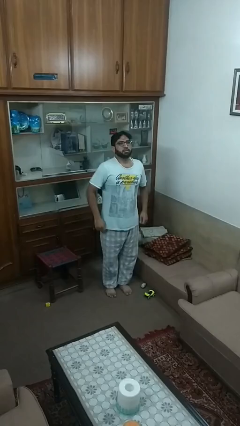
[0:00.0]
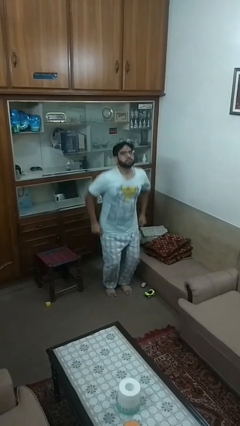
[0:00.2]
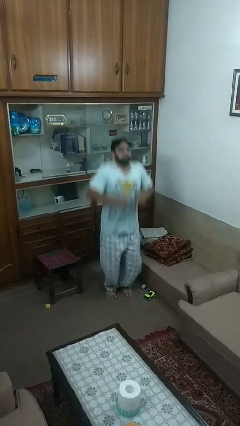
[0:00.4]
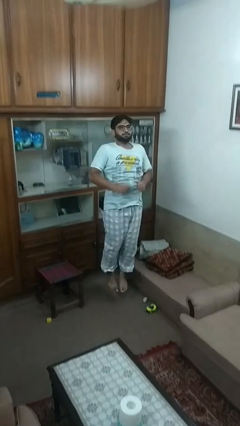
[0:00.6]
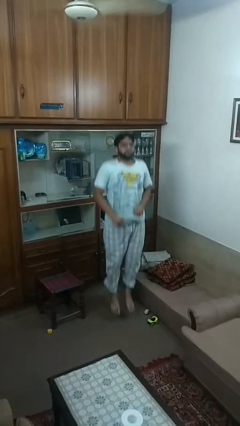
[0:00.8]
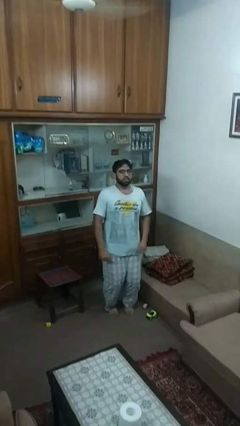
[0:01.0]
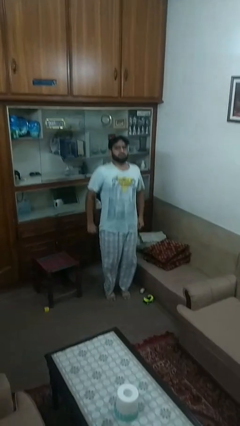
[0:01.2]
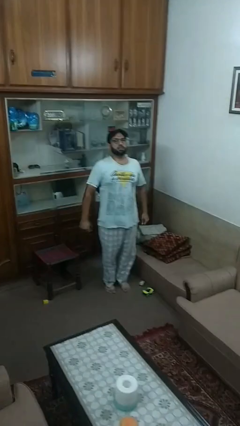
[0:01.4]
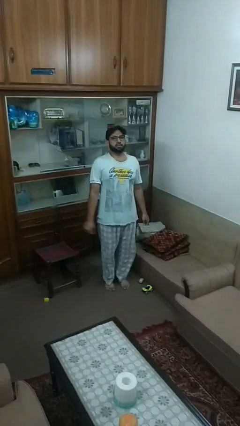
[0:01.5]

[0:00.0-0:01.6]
person jumps

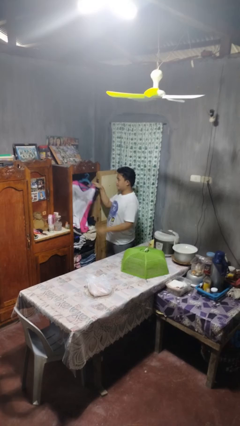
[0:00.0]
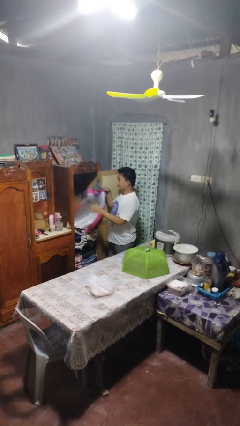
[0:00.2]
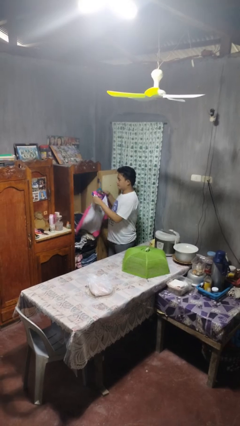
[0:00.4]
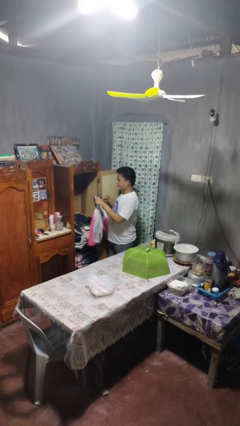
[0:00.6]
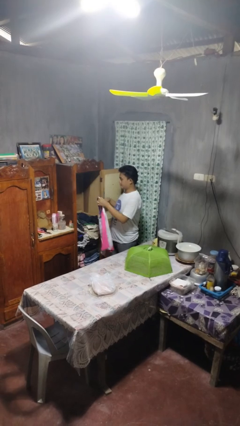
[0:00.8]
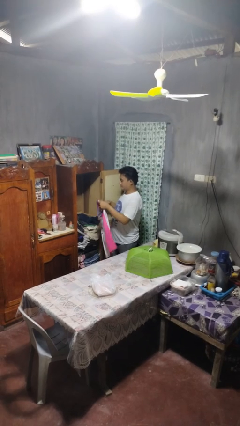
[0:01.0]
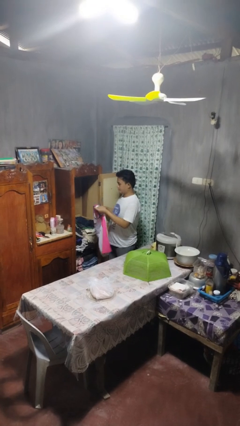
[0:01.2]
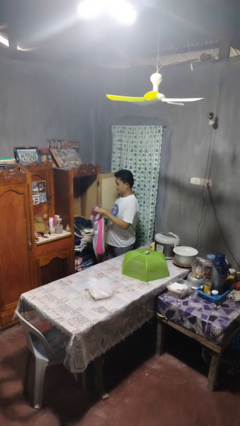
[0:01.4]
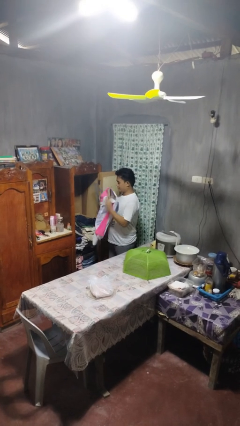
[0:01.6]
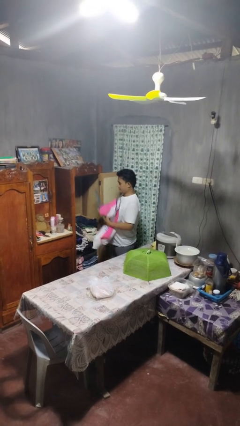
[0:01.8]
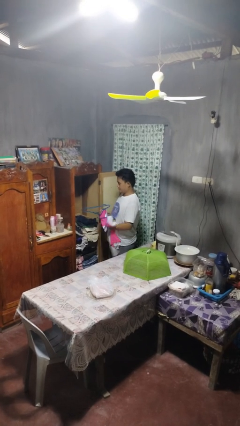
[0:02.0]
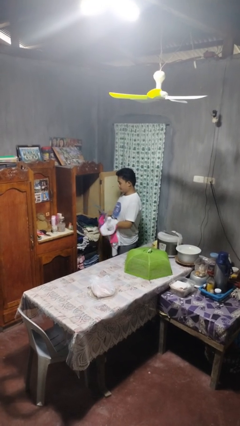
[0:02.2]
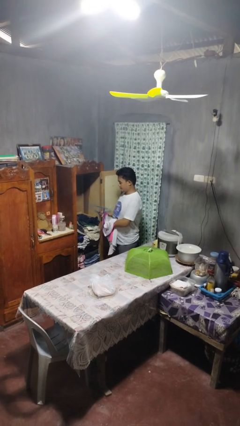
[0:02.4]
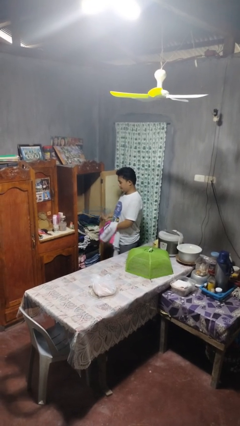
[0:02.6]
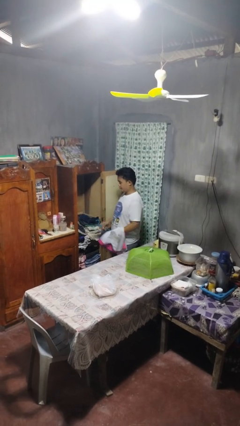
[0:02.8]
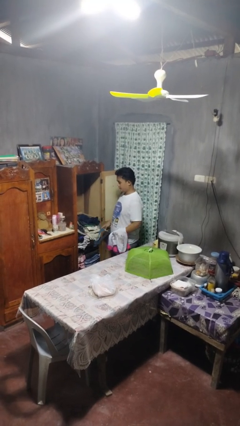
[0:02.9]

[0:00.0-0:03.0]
person takes clothes from closet

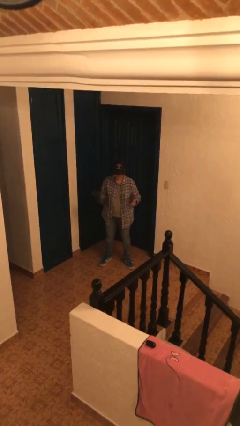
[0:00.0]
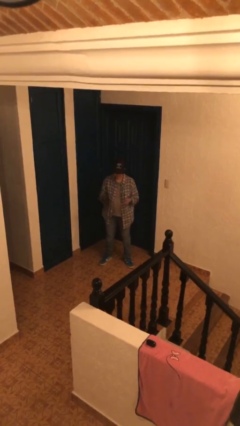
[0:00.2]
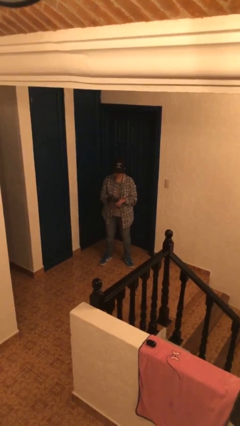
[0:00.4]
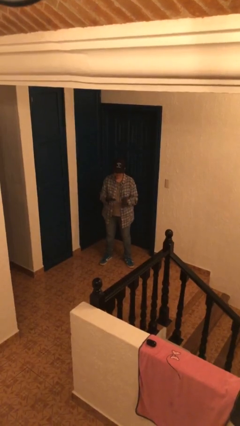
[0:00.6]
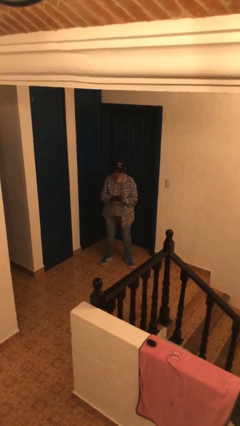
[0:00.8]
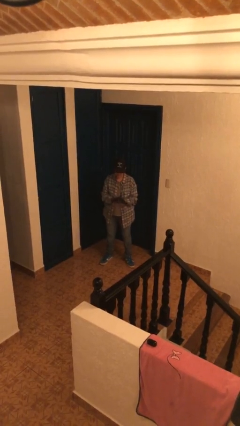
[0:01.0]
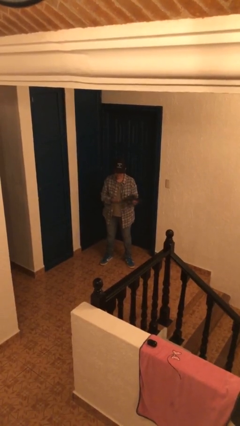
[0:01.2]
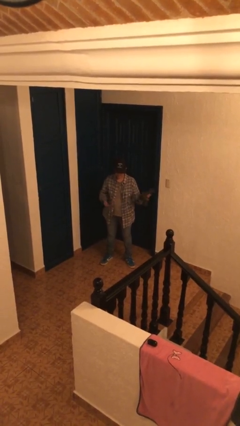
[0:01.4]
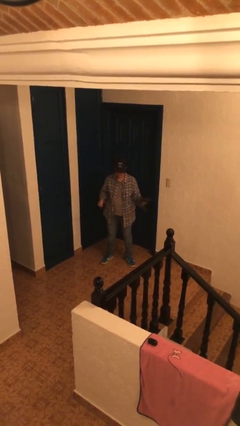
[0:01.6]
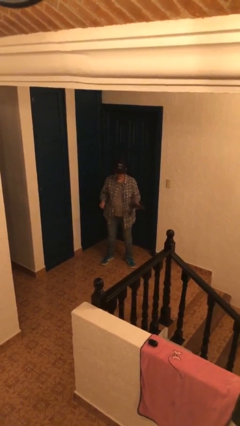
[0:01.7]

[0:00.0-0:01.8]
person takes off gloves

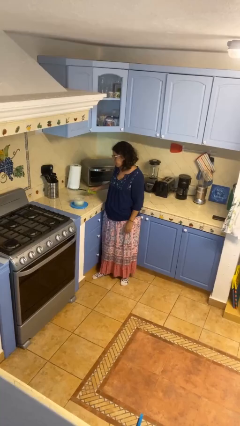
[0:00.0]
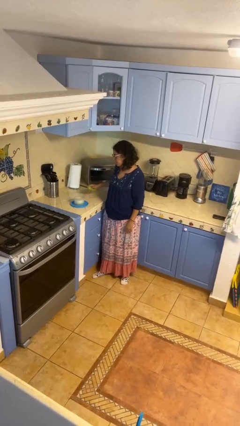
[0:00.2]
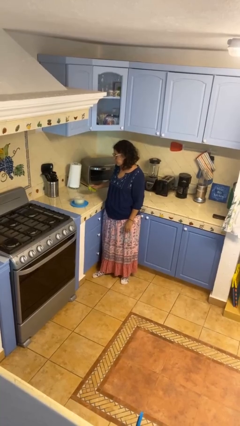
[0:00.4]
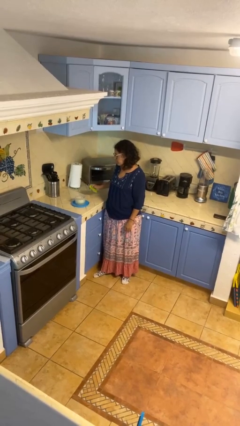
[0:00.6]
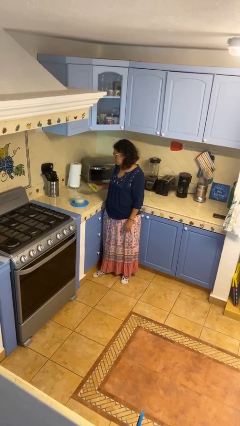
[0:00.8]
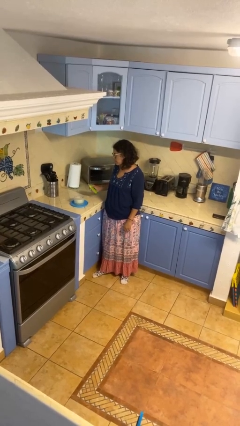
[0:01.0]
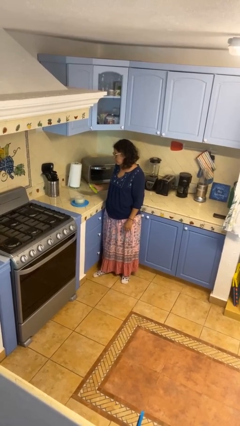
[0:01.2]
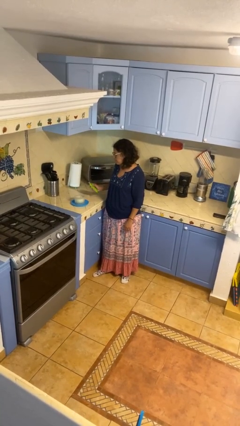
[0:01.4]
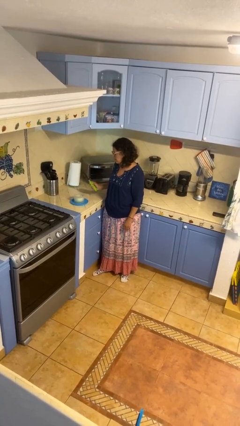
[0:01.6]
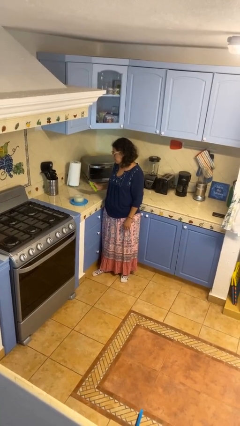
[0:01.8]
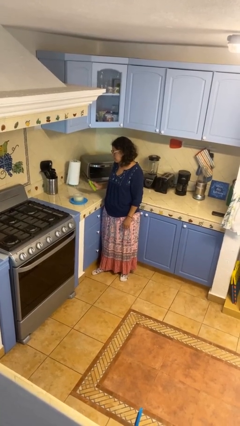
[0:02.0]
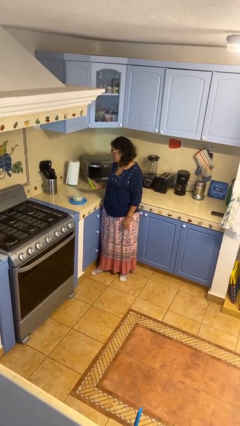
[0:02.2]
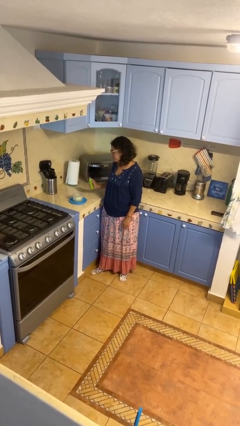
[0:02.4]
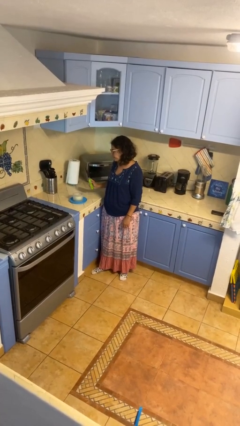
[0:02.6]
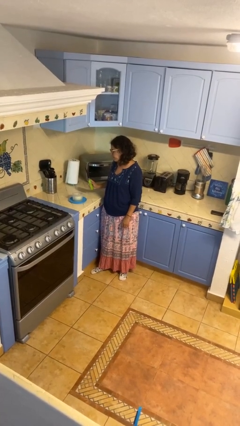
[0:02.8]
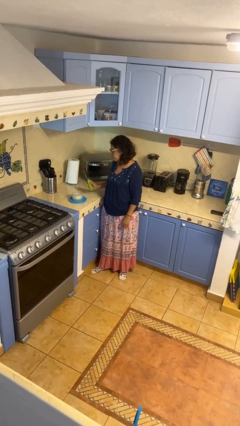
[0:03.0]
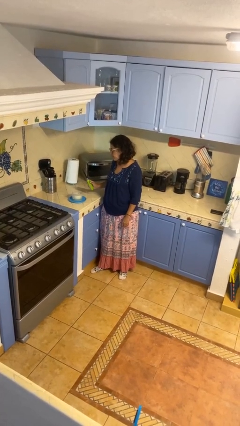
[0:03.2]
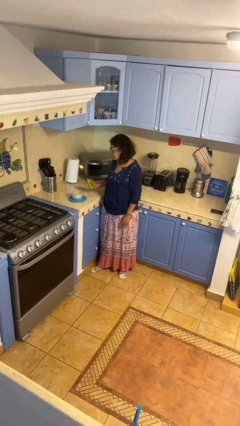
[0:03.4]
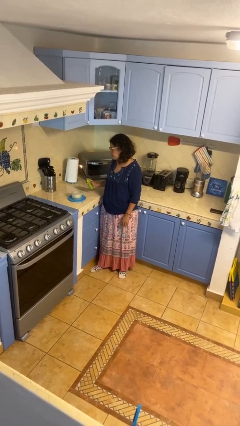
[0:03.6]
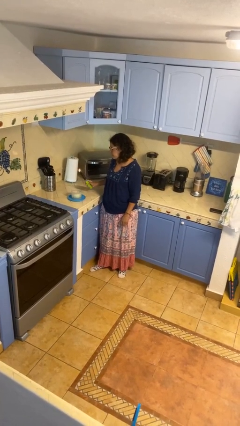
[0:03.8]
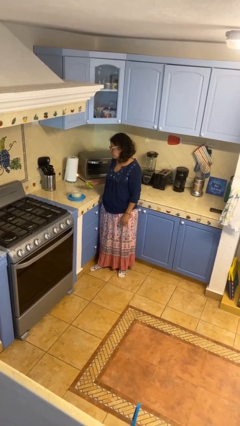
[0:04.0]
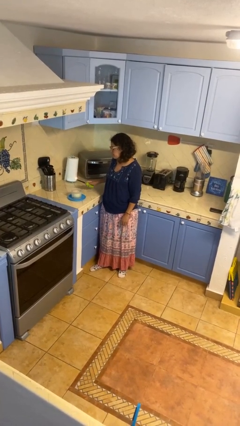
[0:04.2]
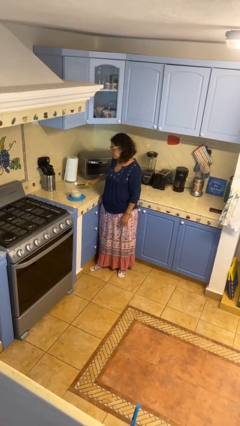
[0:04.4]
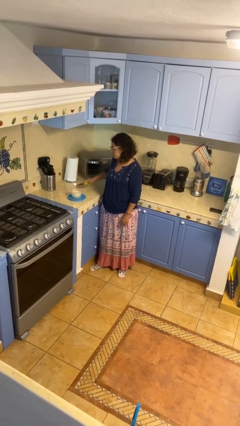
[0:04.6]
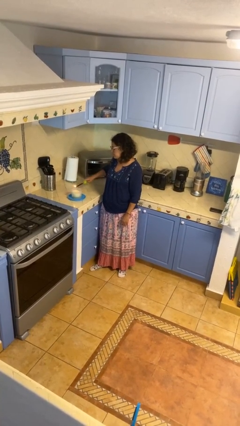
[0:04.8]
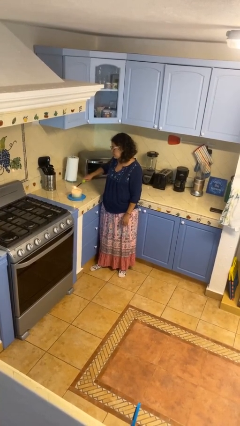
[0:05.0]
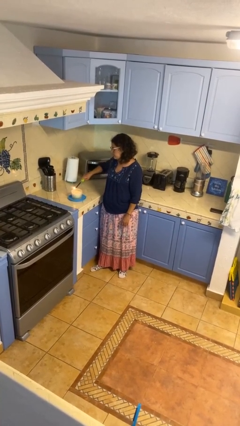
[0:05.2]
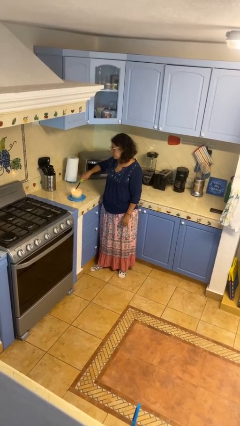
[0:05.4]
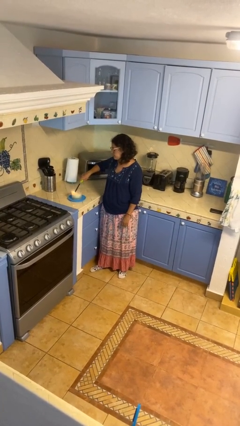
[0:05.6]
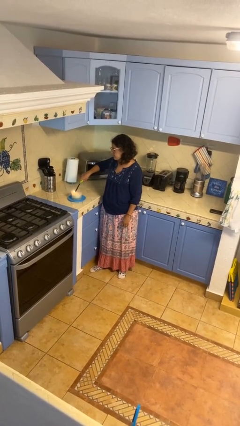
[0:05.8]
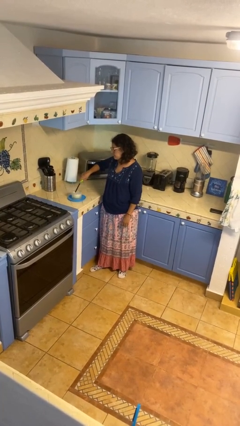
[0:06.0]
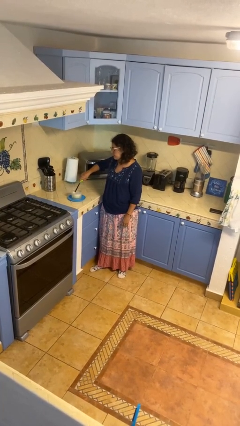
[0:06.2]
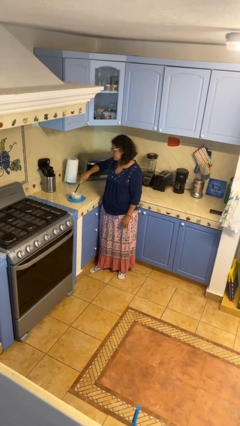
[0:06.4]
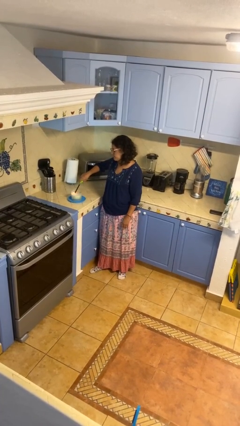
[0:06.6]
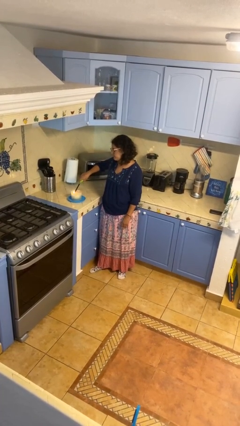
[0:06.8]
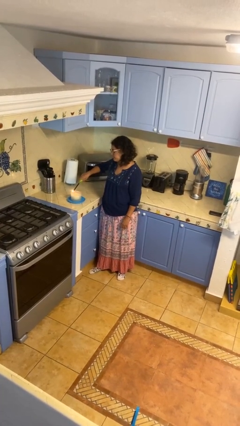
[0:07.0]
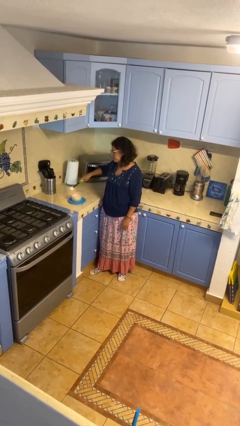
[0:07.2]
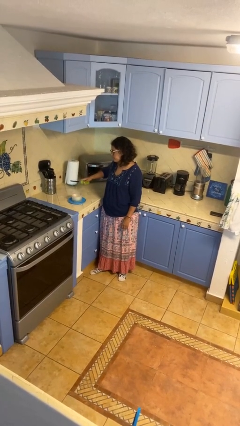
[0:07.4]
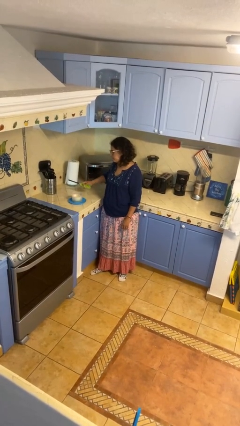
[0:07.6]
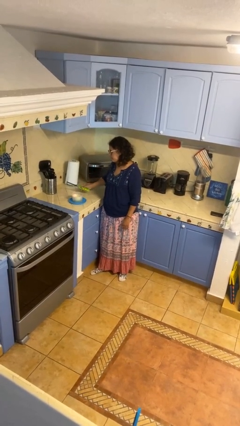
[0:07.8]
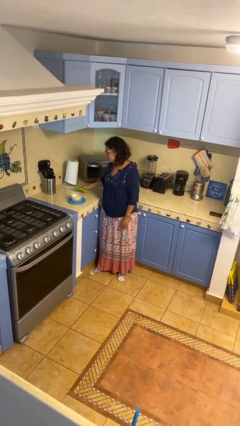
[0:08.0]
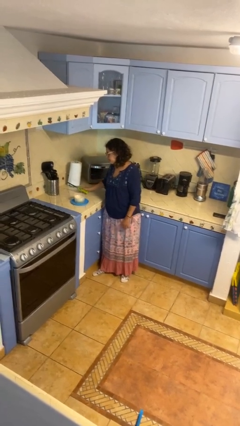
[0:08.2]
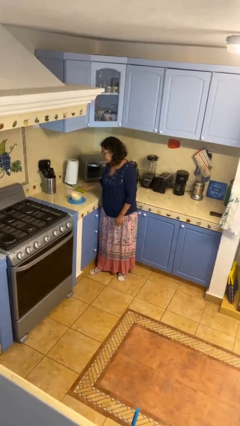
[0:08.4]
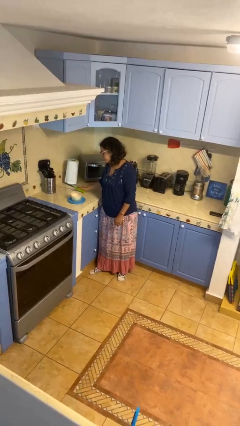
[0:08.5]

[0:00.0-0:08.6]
person lights candle

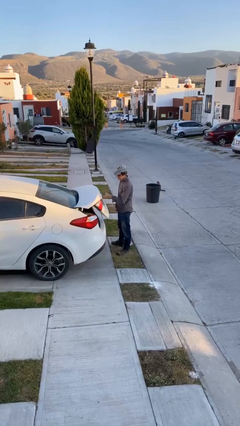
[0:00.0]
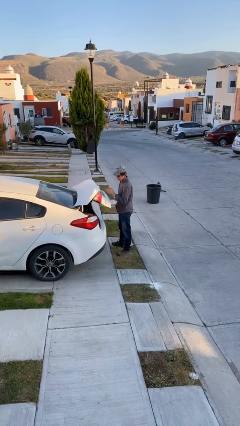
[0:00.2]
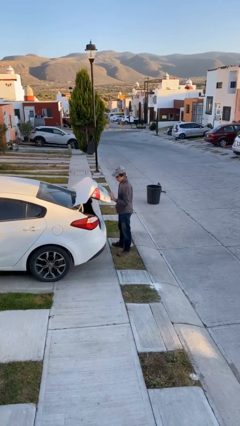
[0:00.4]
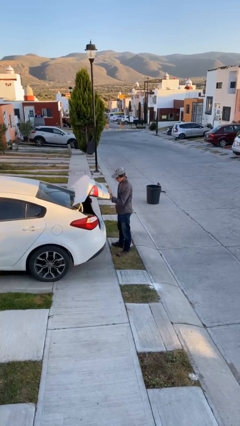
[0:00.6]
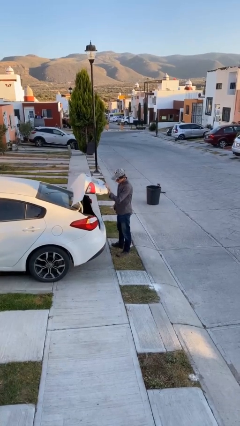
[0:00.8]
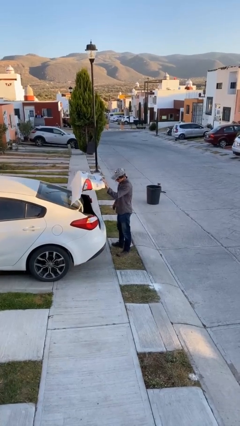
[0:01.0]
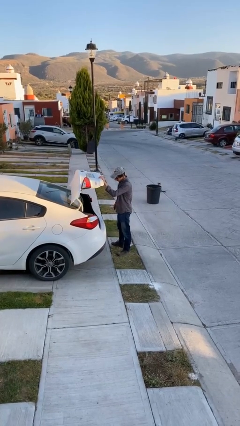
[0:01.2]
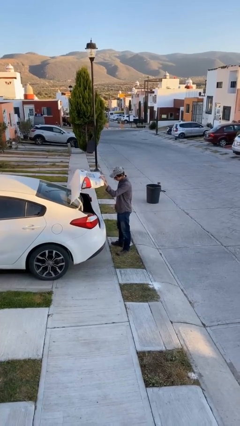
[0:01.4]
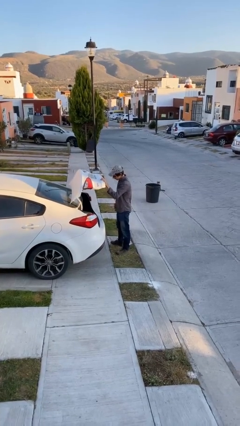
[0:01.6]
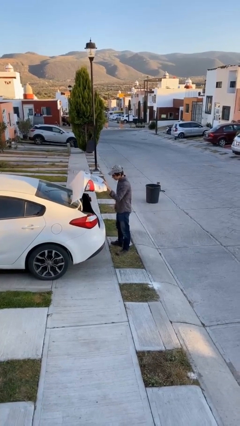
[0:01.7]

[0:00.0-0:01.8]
person opens car trunk

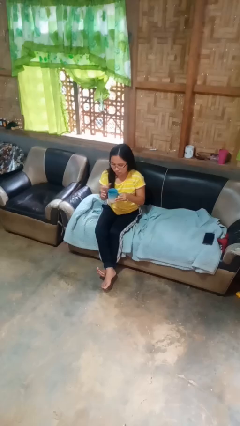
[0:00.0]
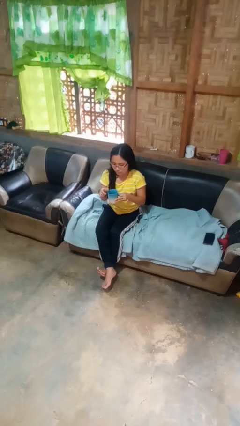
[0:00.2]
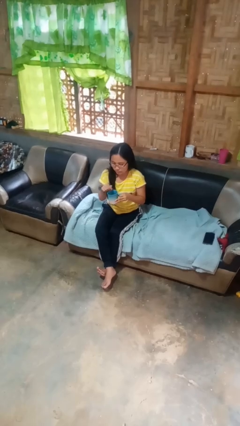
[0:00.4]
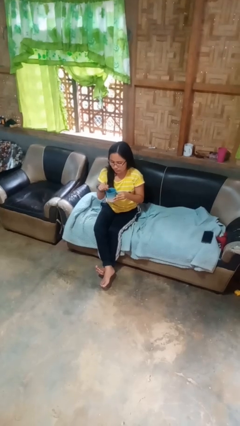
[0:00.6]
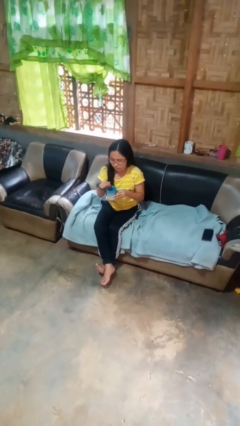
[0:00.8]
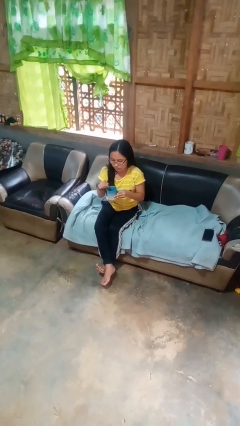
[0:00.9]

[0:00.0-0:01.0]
person stirs mug
